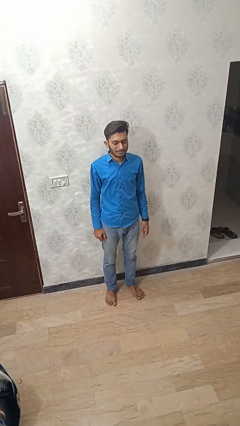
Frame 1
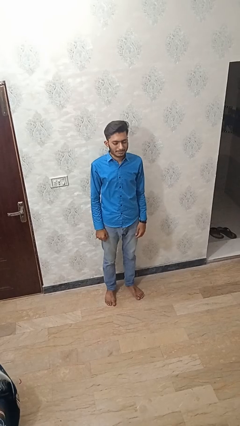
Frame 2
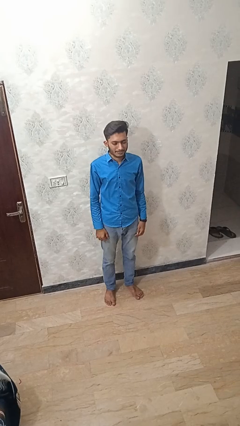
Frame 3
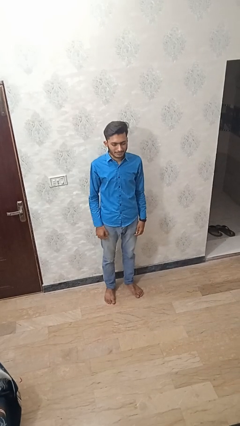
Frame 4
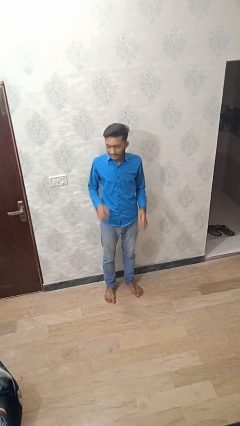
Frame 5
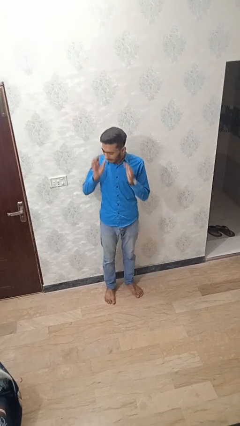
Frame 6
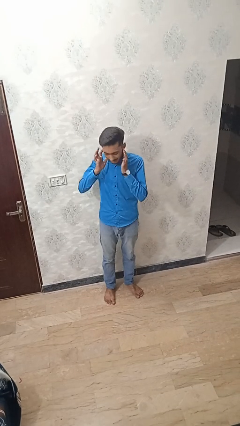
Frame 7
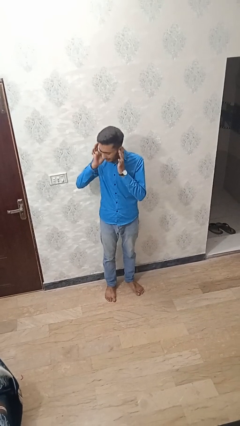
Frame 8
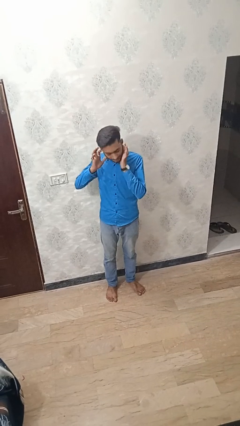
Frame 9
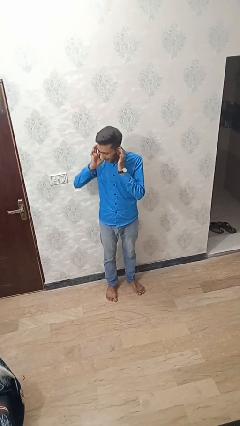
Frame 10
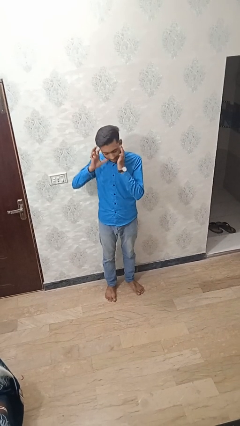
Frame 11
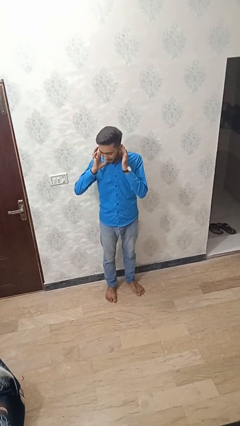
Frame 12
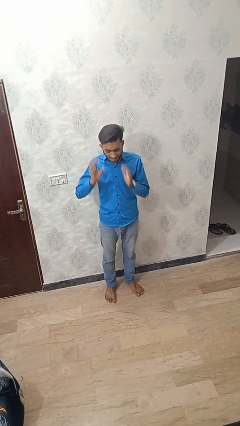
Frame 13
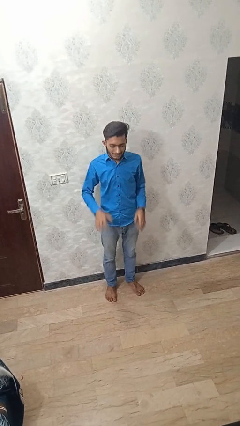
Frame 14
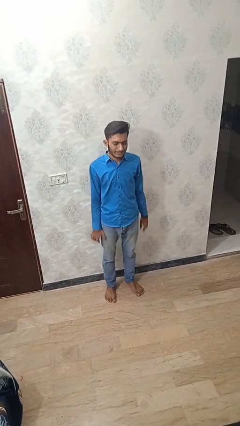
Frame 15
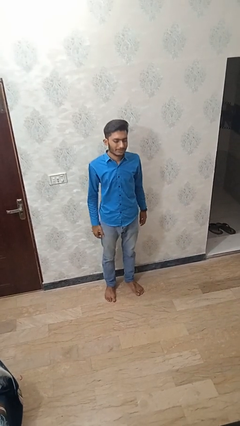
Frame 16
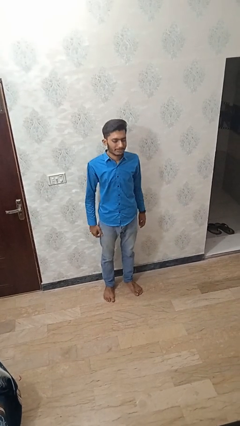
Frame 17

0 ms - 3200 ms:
person puts fingers in ear

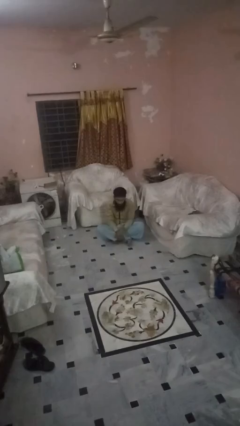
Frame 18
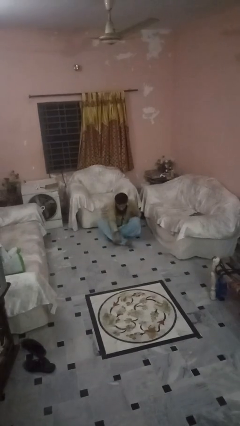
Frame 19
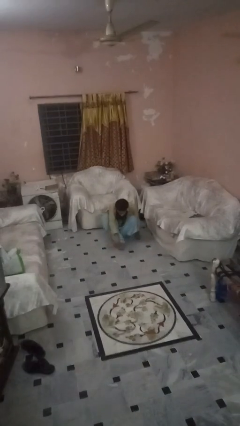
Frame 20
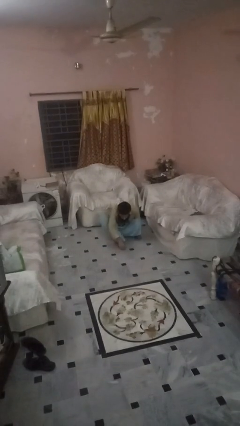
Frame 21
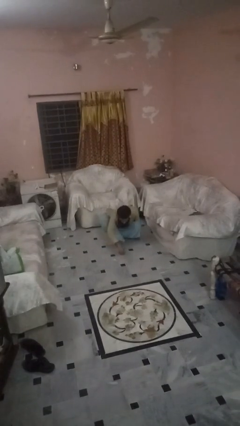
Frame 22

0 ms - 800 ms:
person stands up from floor

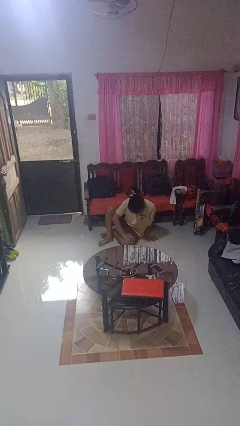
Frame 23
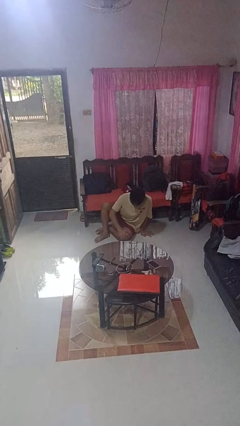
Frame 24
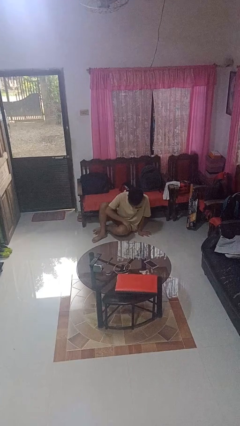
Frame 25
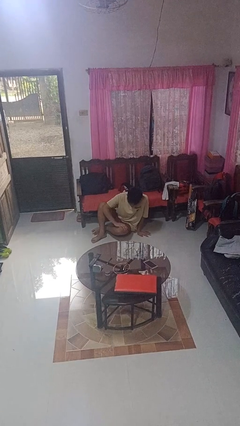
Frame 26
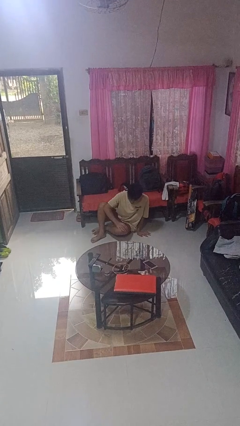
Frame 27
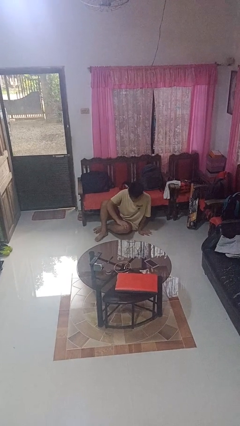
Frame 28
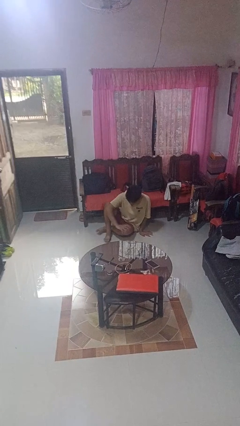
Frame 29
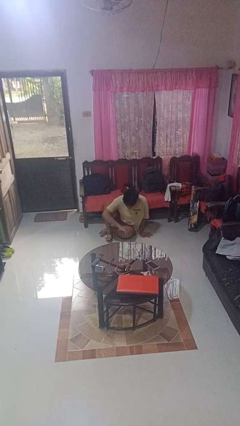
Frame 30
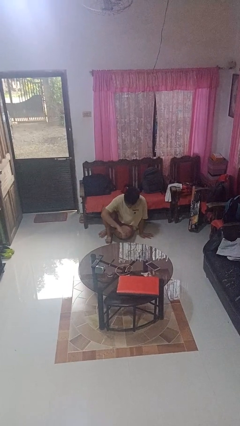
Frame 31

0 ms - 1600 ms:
person lies down on floor

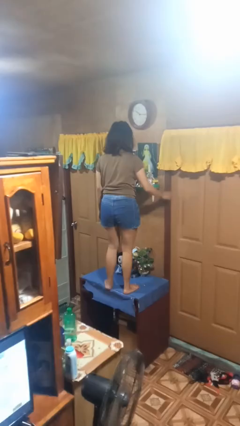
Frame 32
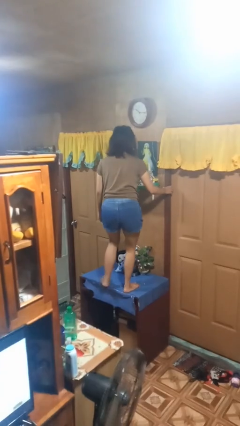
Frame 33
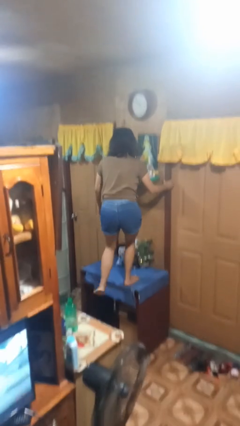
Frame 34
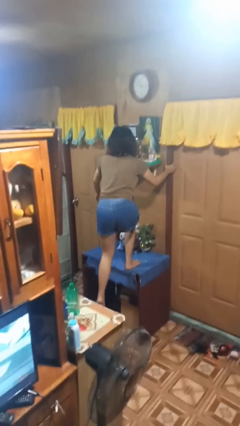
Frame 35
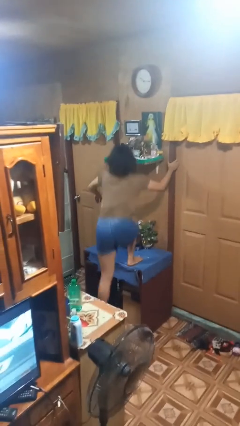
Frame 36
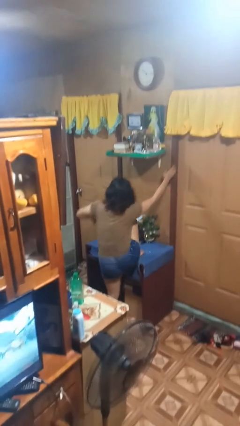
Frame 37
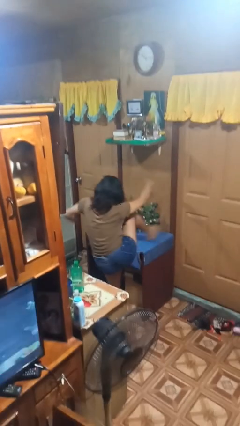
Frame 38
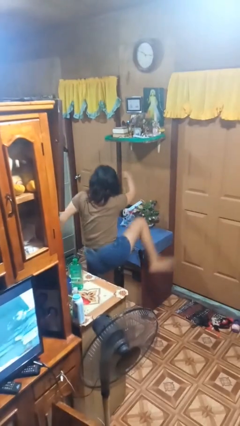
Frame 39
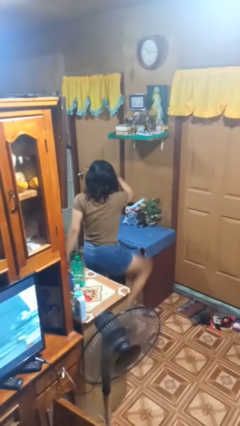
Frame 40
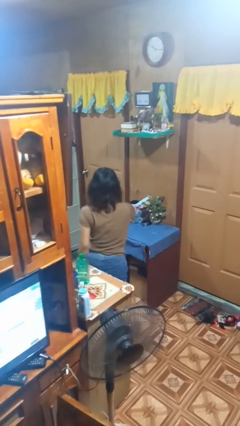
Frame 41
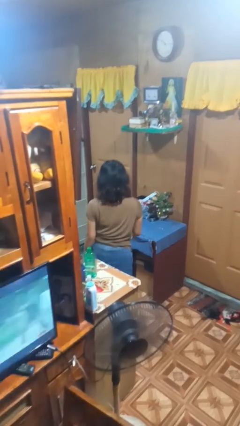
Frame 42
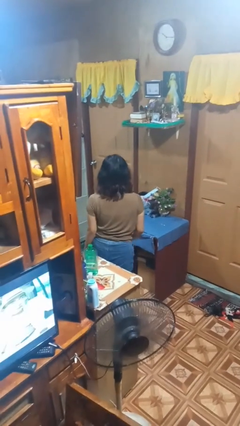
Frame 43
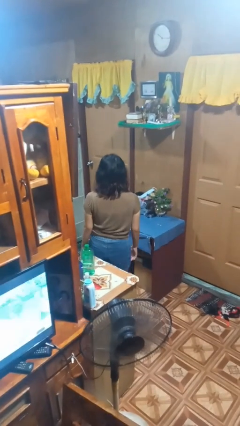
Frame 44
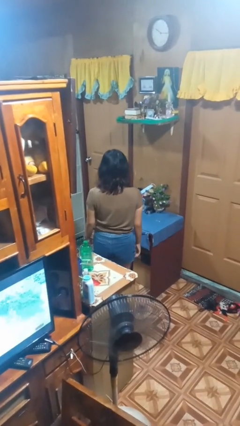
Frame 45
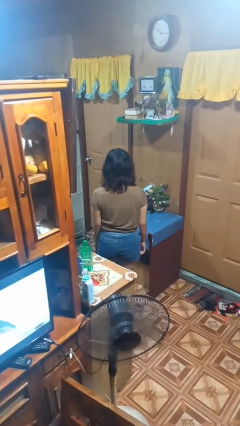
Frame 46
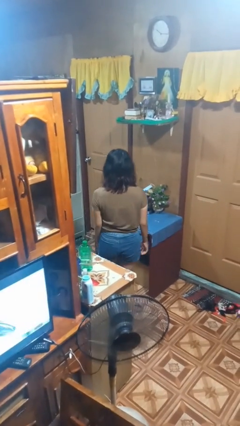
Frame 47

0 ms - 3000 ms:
person climbs off table

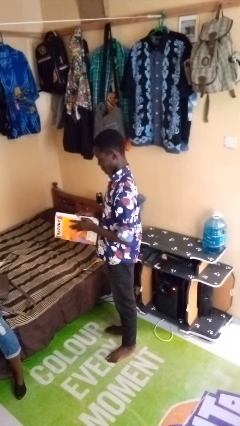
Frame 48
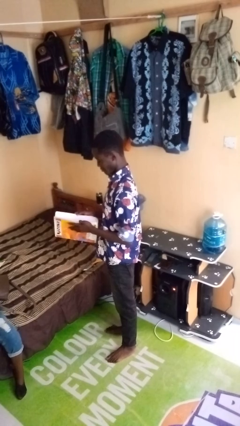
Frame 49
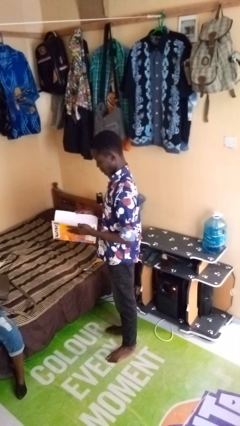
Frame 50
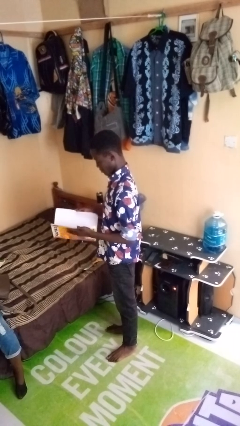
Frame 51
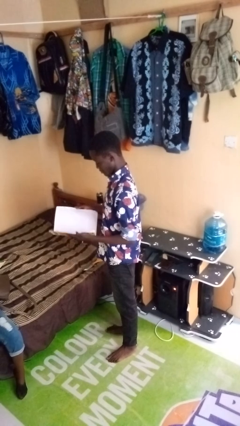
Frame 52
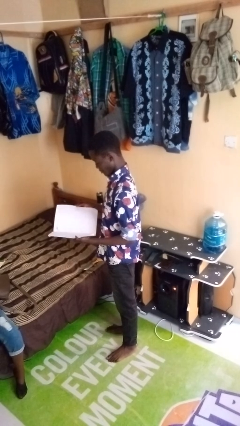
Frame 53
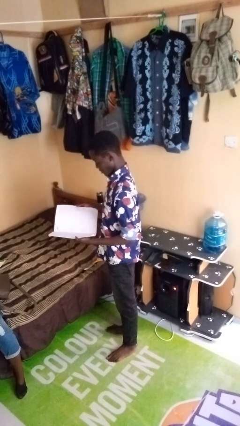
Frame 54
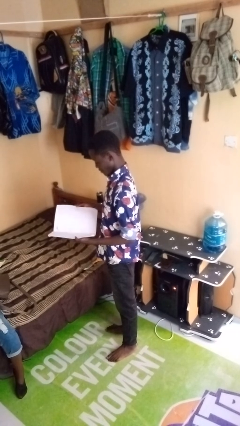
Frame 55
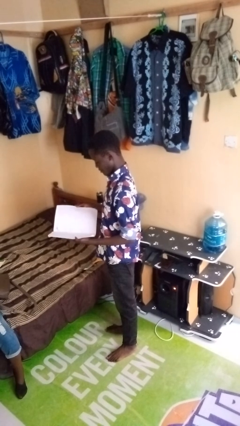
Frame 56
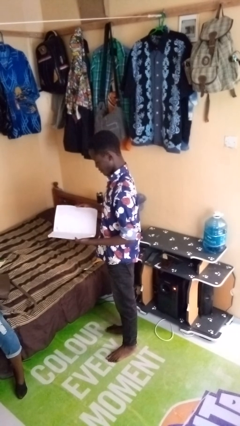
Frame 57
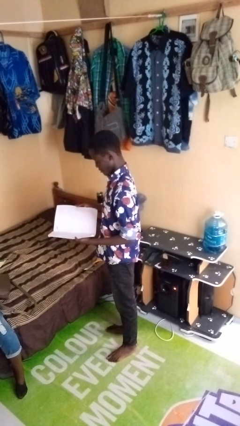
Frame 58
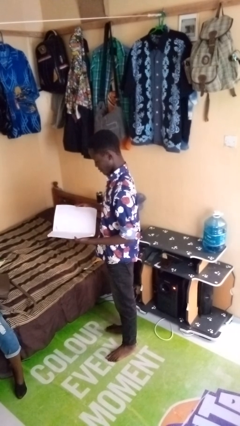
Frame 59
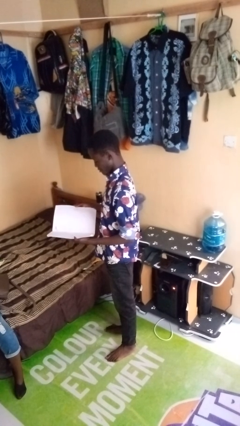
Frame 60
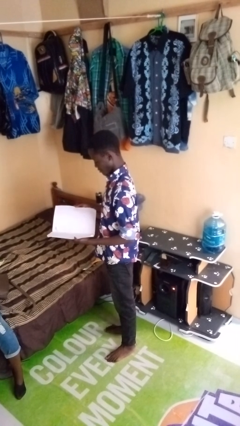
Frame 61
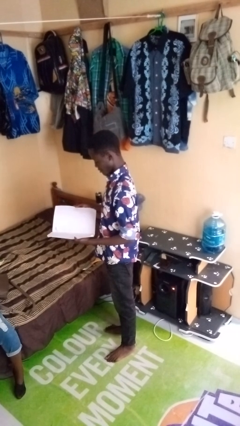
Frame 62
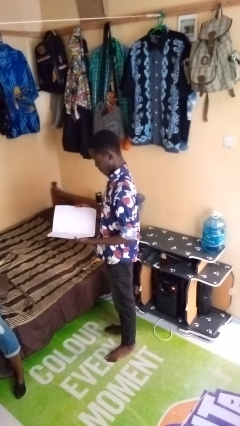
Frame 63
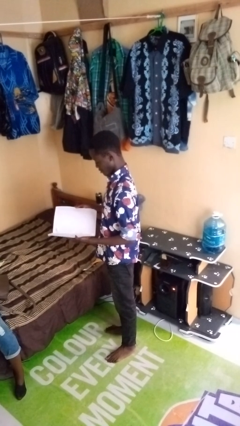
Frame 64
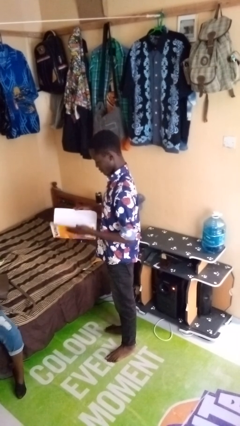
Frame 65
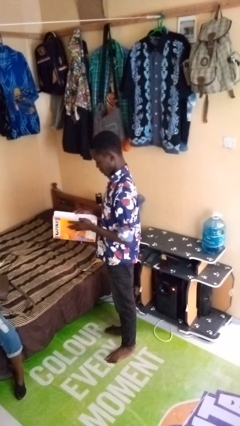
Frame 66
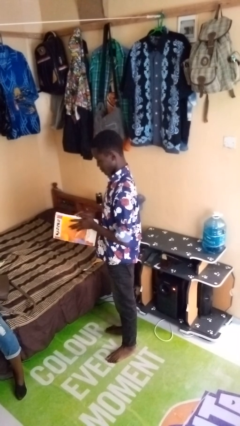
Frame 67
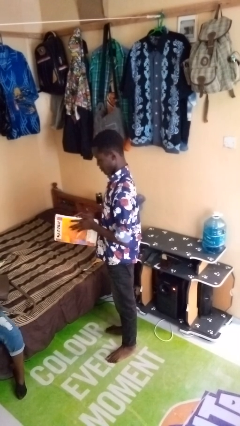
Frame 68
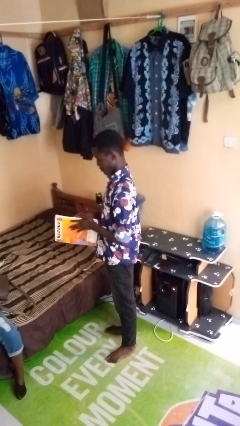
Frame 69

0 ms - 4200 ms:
person reads book

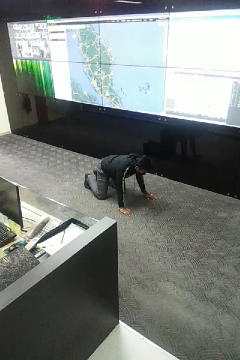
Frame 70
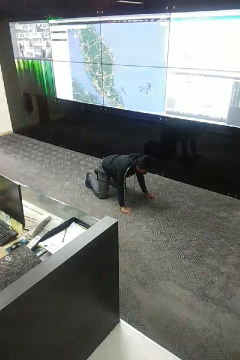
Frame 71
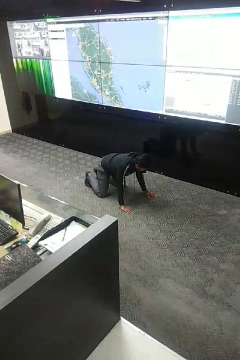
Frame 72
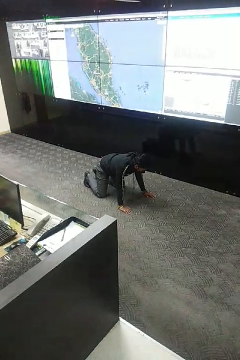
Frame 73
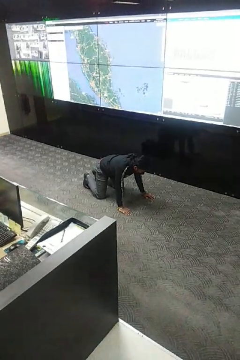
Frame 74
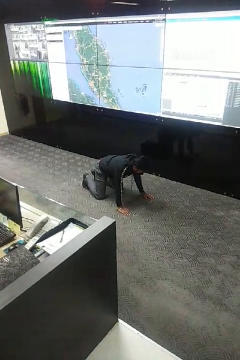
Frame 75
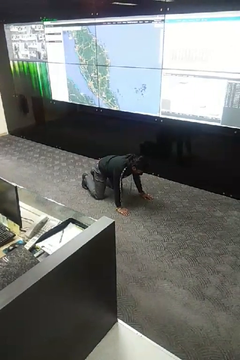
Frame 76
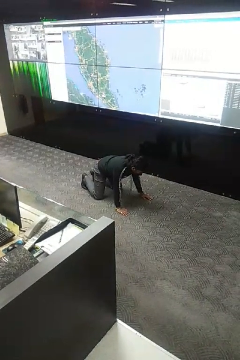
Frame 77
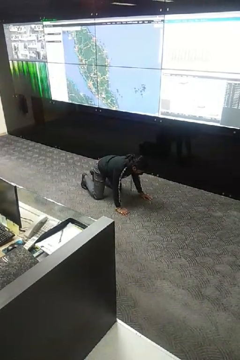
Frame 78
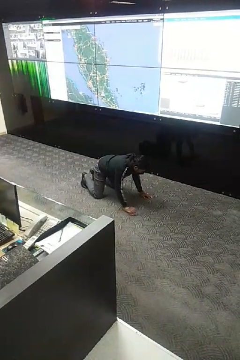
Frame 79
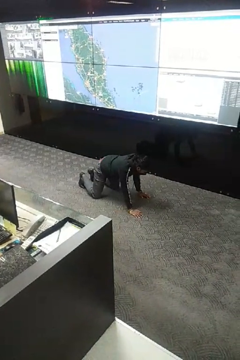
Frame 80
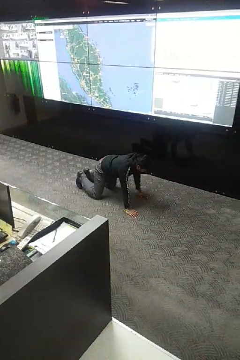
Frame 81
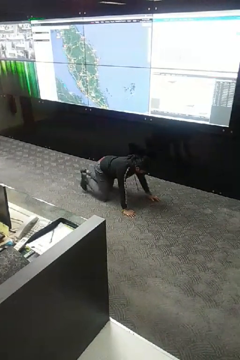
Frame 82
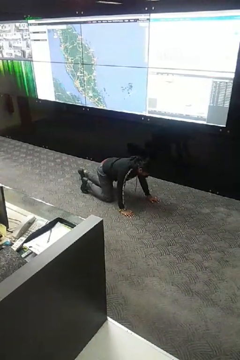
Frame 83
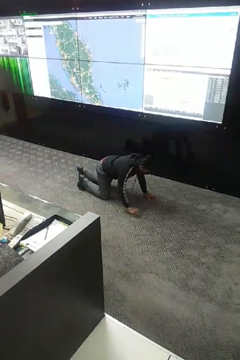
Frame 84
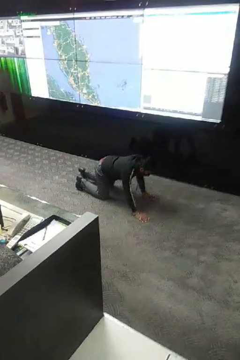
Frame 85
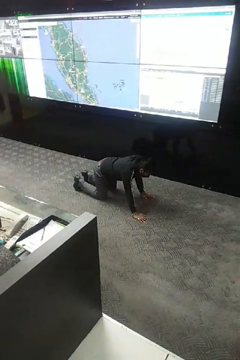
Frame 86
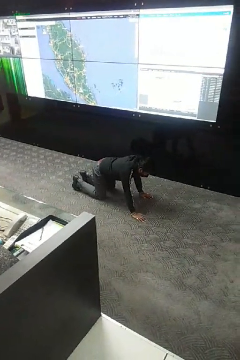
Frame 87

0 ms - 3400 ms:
person crawls

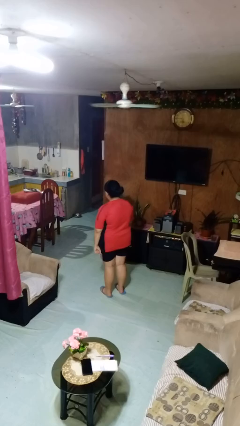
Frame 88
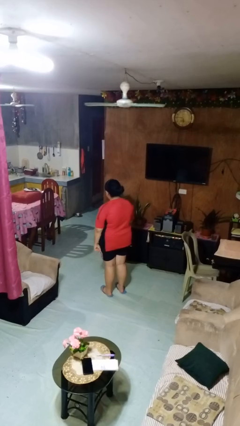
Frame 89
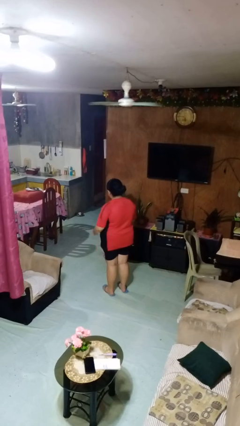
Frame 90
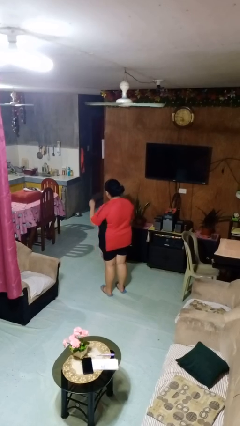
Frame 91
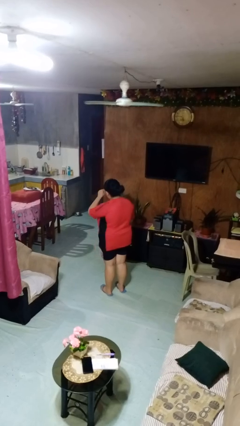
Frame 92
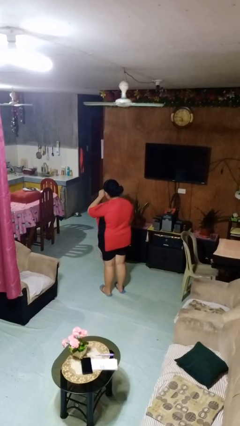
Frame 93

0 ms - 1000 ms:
person rubs eyes

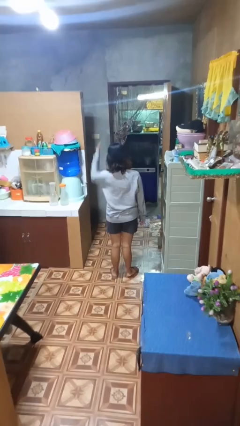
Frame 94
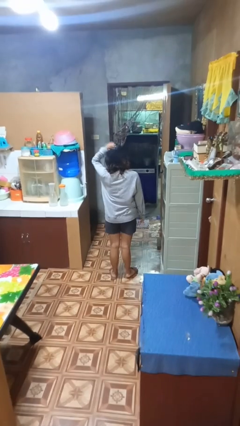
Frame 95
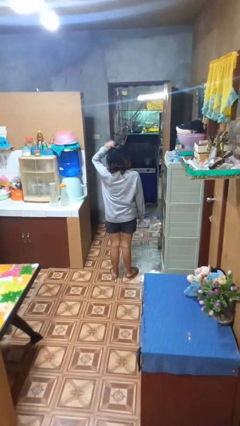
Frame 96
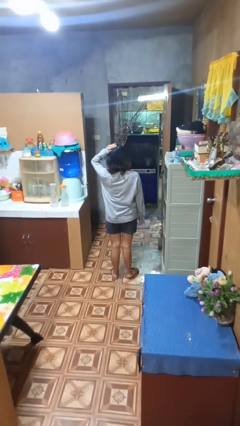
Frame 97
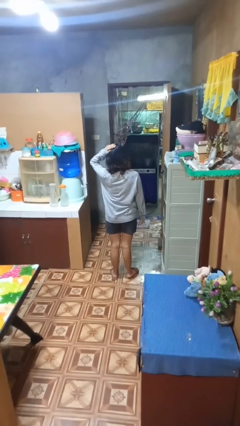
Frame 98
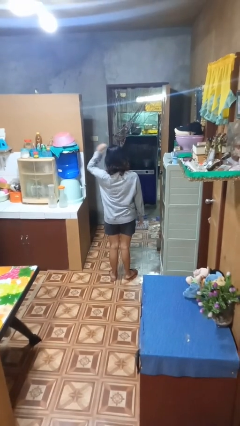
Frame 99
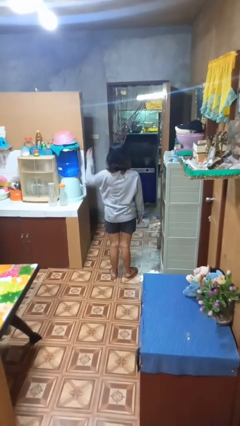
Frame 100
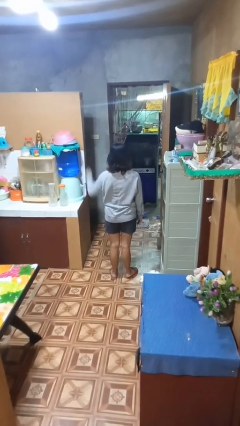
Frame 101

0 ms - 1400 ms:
person pats head
